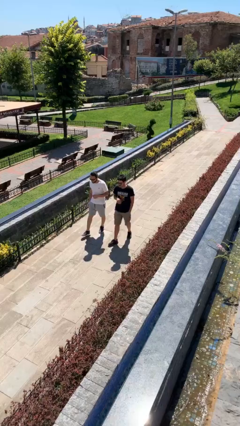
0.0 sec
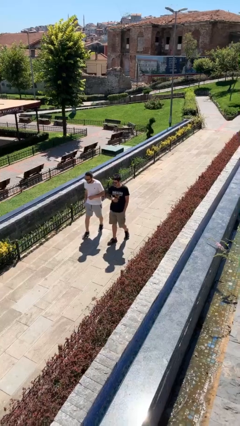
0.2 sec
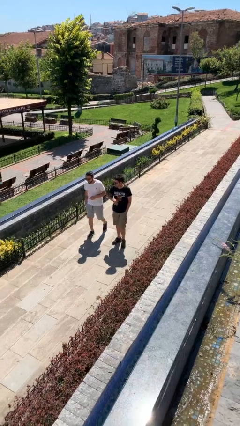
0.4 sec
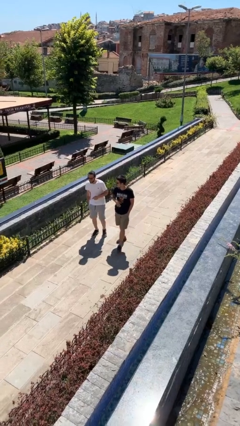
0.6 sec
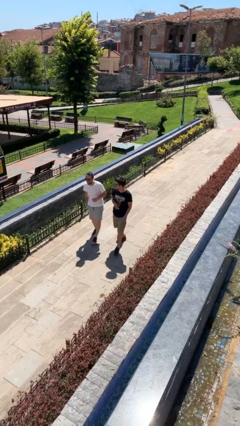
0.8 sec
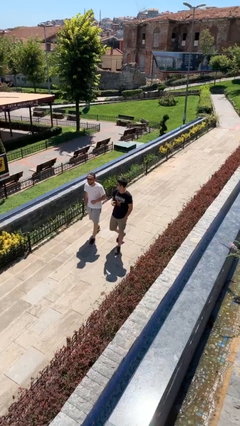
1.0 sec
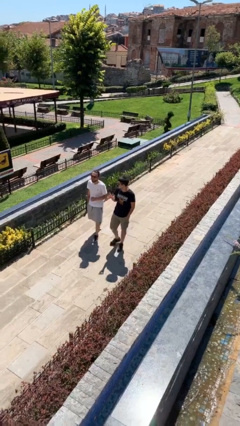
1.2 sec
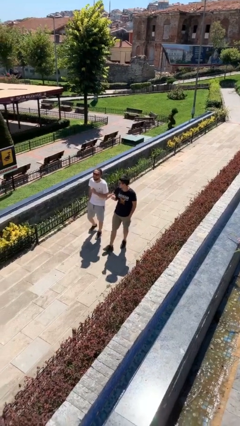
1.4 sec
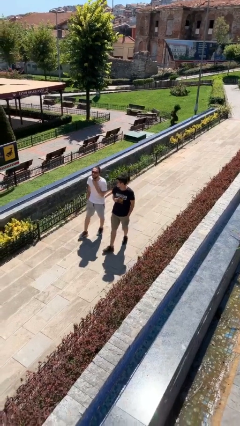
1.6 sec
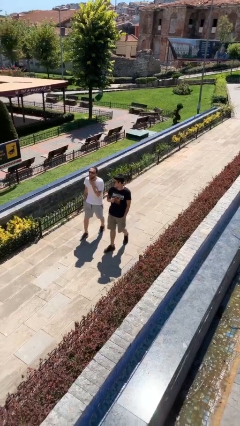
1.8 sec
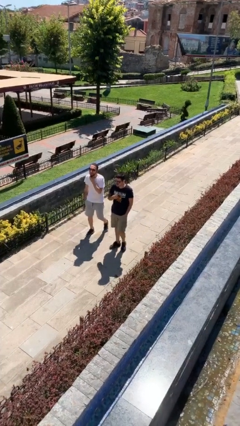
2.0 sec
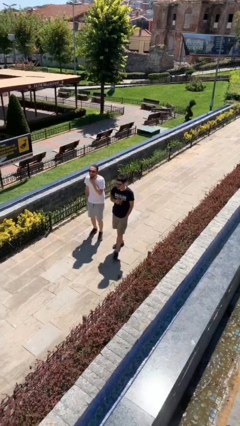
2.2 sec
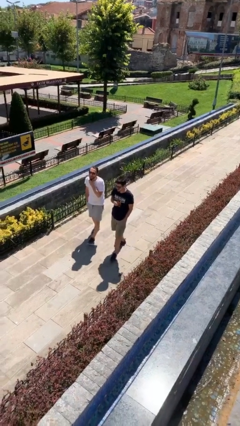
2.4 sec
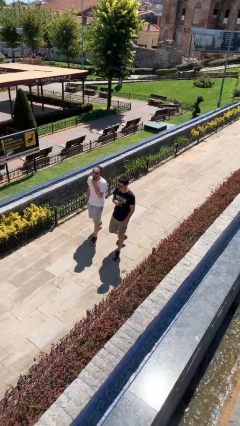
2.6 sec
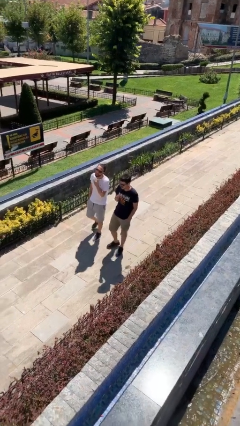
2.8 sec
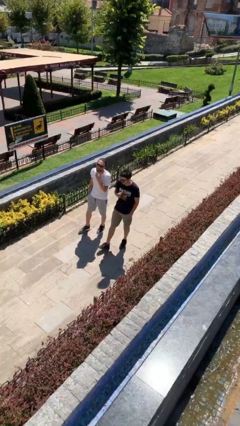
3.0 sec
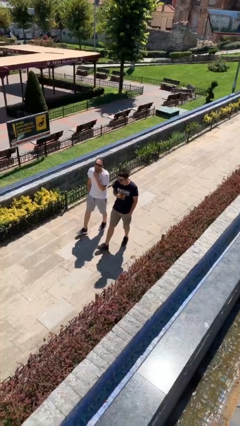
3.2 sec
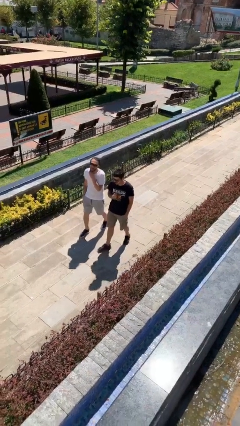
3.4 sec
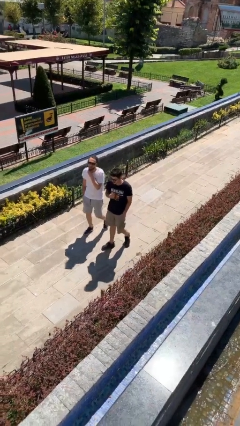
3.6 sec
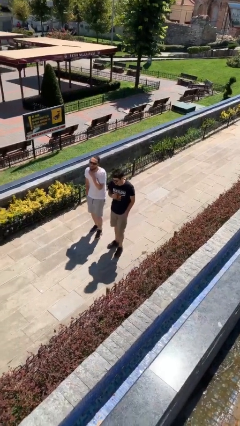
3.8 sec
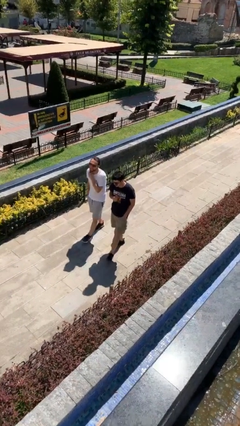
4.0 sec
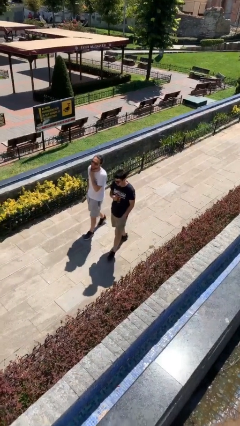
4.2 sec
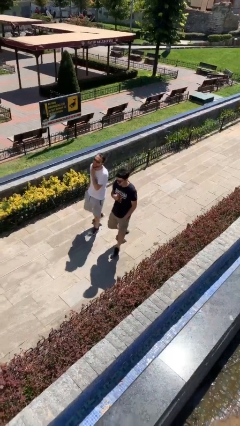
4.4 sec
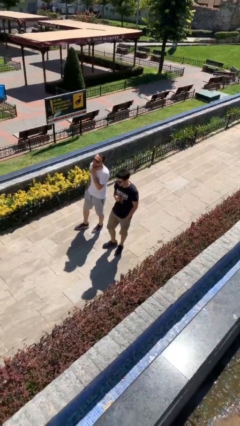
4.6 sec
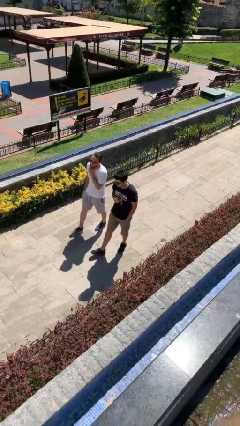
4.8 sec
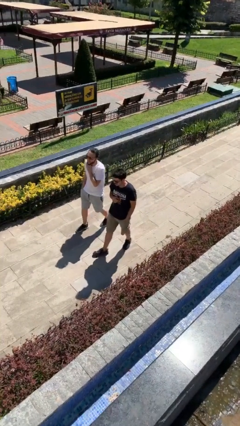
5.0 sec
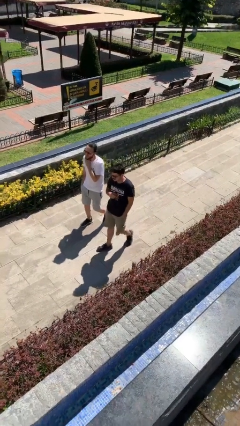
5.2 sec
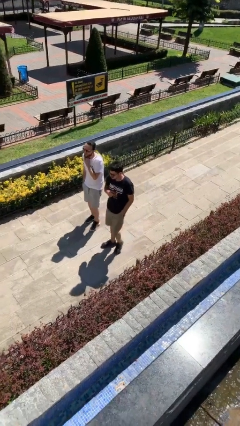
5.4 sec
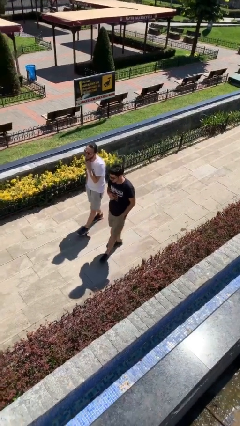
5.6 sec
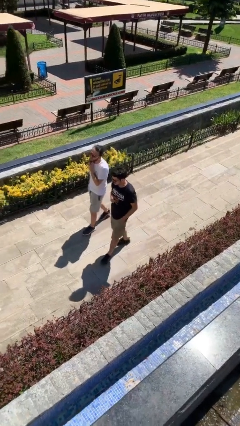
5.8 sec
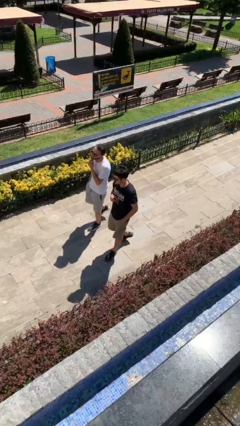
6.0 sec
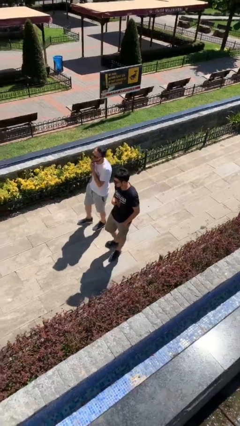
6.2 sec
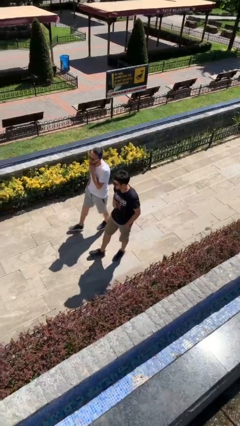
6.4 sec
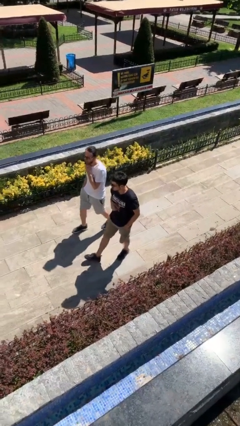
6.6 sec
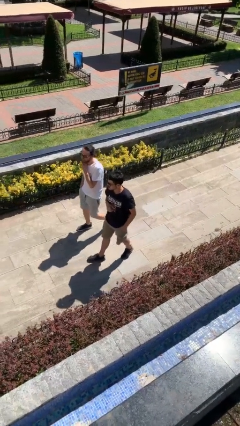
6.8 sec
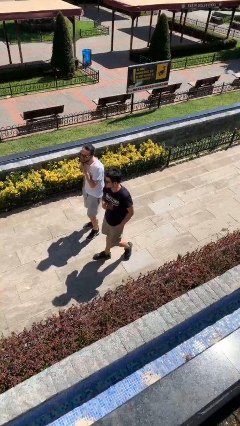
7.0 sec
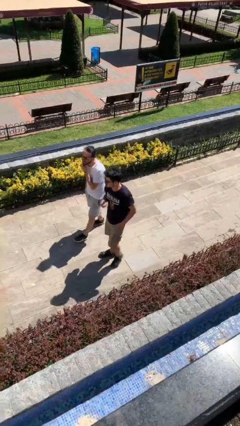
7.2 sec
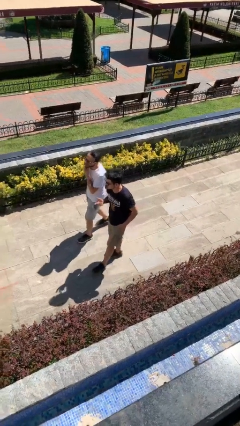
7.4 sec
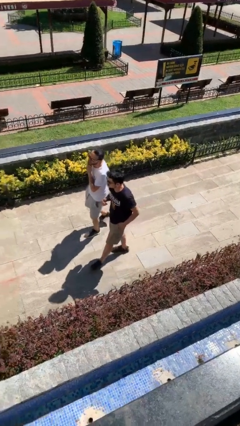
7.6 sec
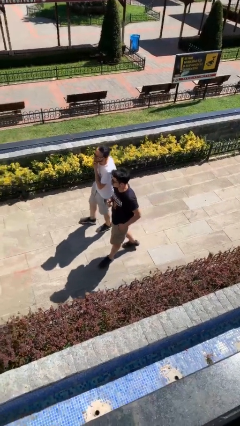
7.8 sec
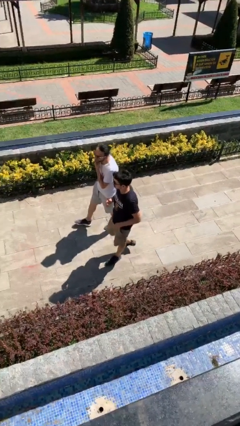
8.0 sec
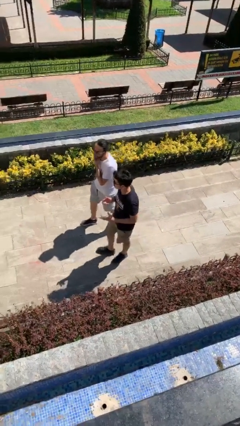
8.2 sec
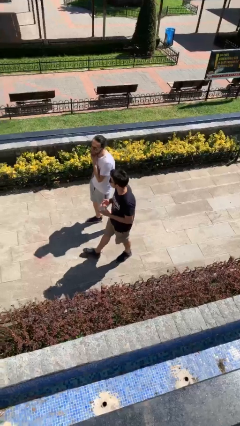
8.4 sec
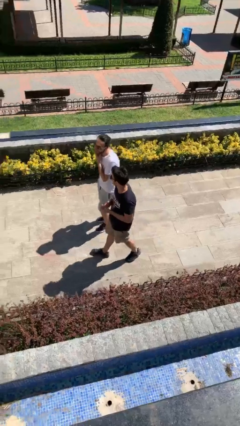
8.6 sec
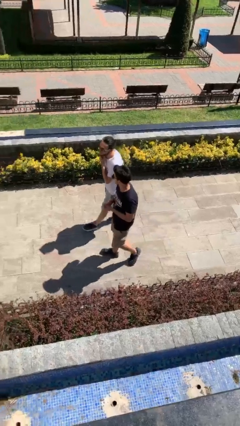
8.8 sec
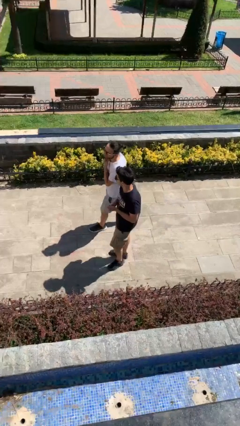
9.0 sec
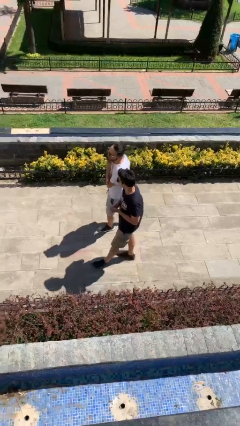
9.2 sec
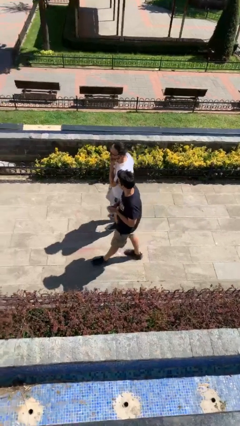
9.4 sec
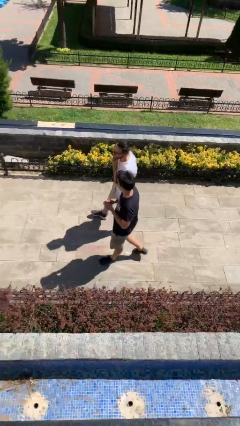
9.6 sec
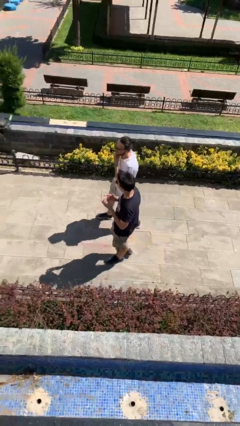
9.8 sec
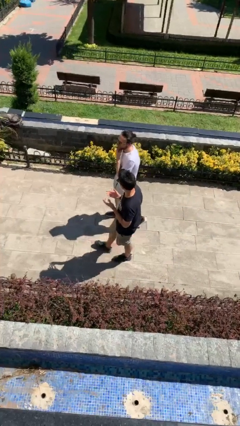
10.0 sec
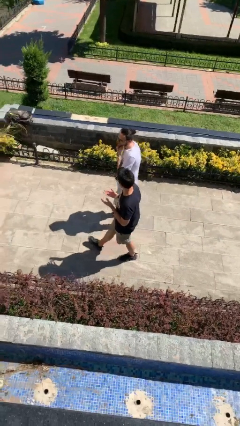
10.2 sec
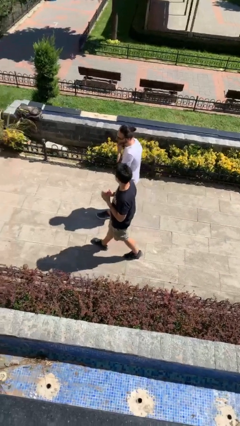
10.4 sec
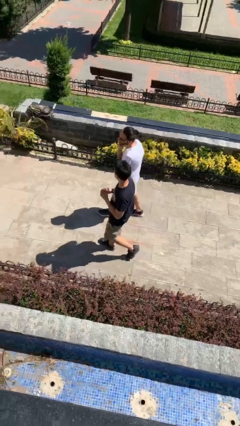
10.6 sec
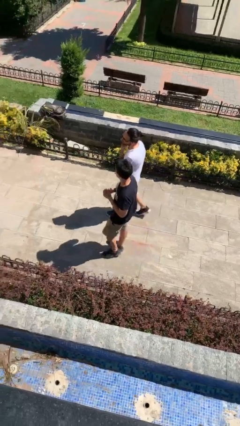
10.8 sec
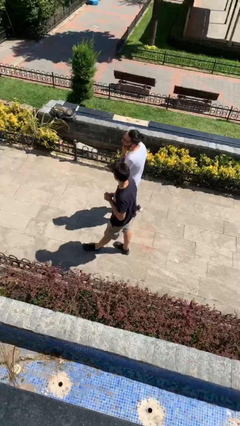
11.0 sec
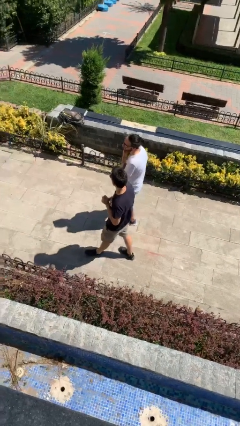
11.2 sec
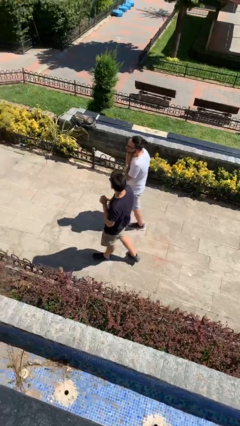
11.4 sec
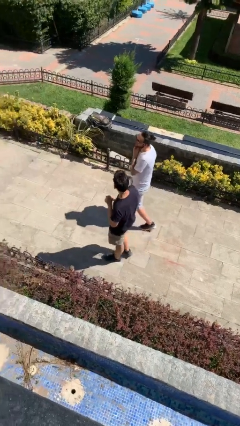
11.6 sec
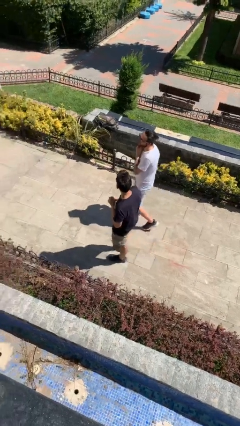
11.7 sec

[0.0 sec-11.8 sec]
person talks to person

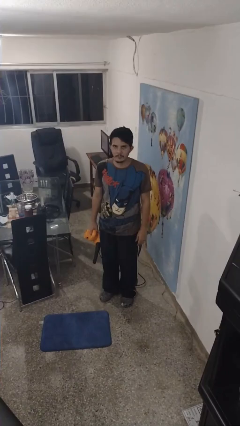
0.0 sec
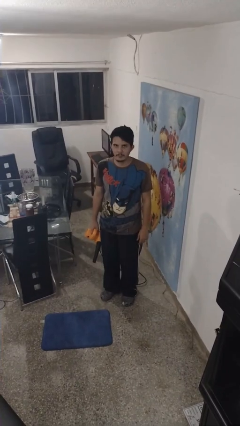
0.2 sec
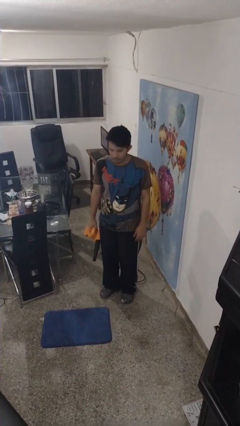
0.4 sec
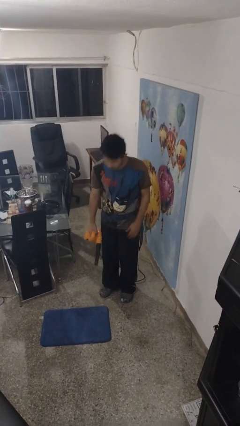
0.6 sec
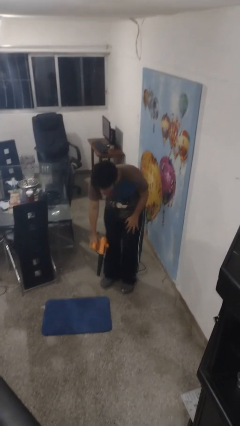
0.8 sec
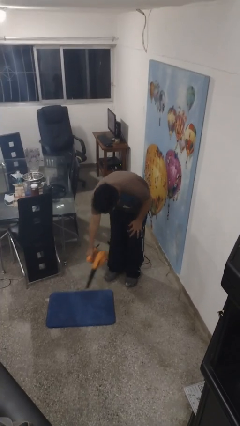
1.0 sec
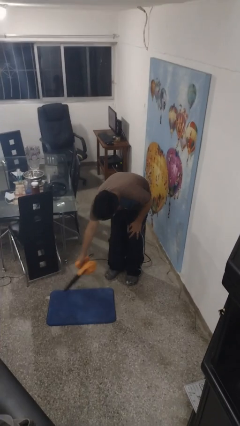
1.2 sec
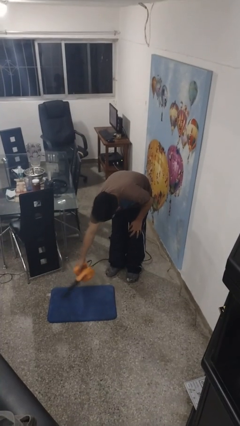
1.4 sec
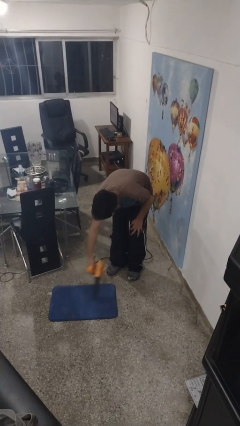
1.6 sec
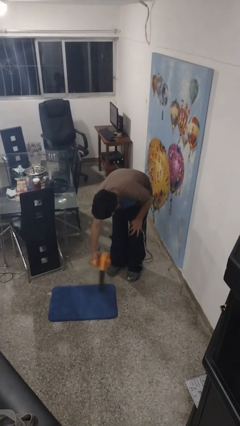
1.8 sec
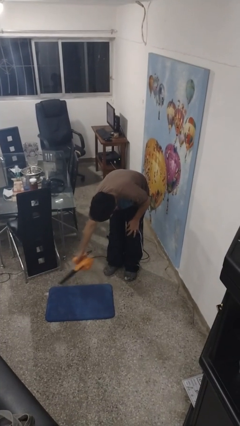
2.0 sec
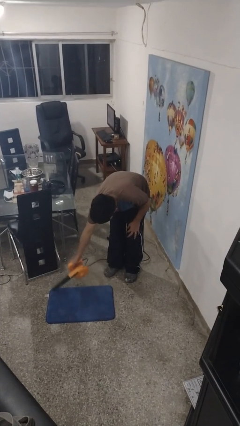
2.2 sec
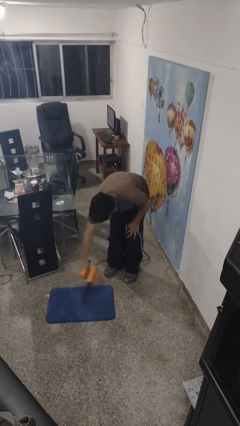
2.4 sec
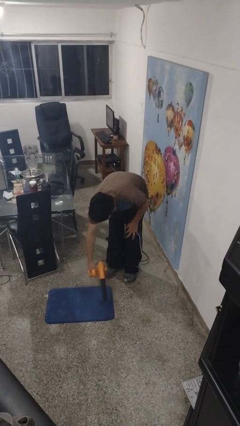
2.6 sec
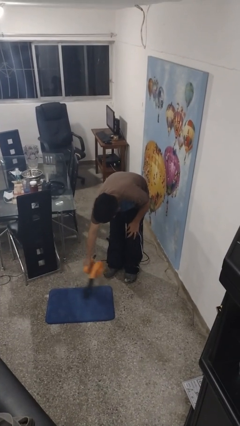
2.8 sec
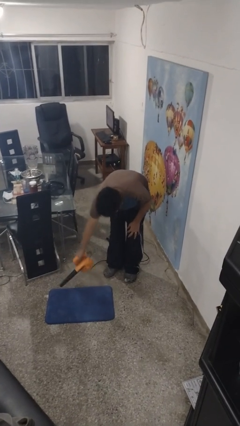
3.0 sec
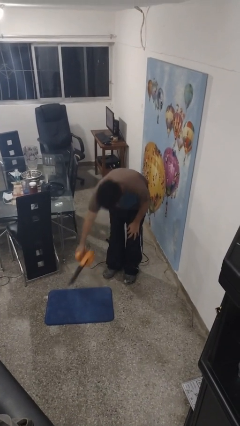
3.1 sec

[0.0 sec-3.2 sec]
person vacuums carpet

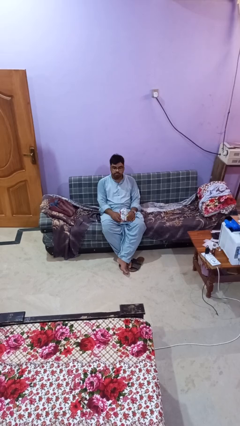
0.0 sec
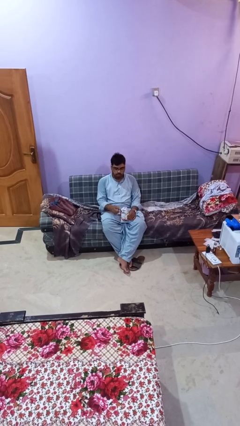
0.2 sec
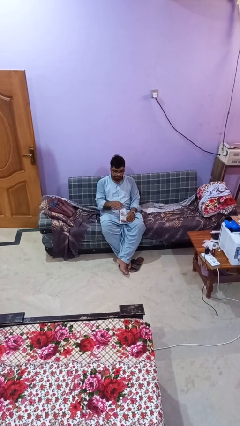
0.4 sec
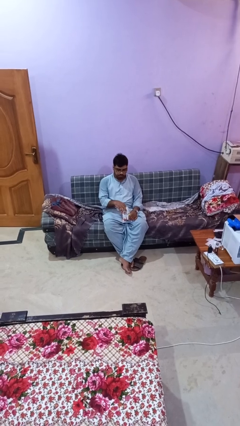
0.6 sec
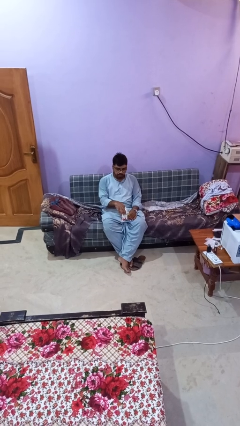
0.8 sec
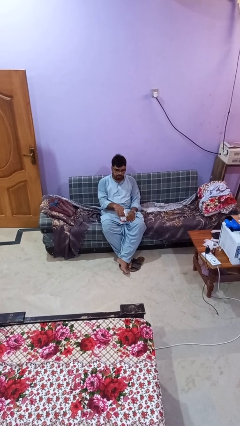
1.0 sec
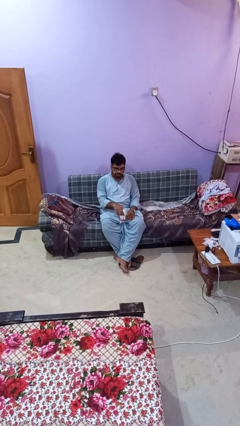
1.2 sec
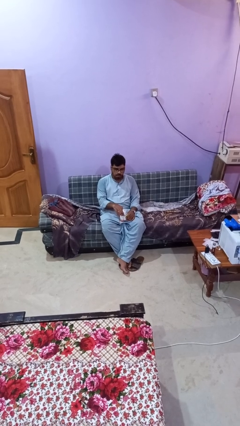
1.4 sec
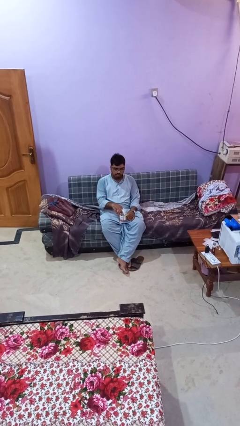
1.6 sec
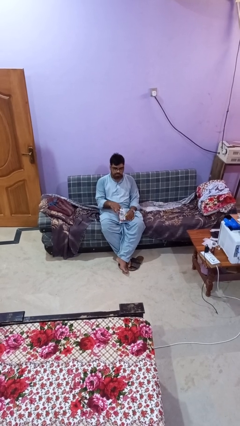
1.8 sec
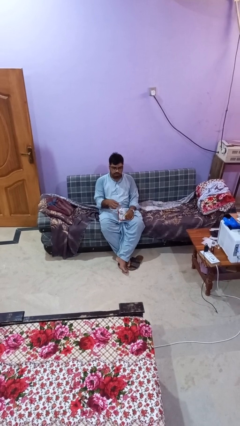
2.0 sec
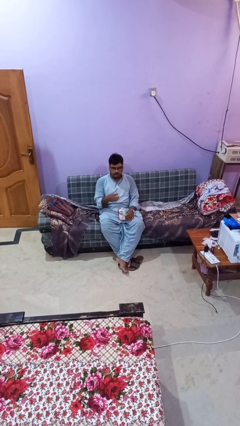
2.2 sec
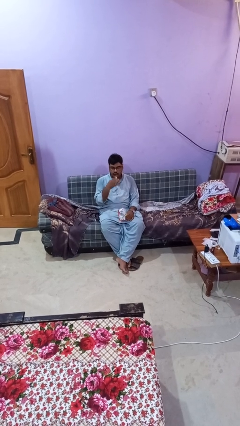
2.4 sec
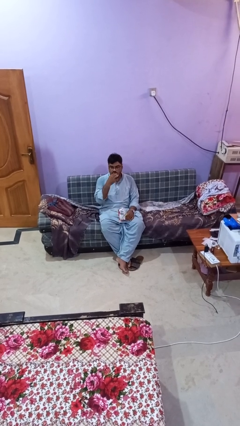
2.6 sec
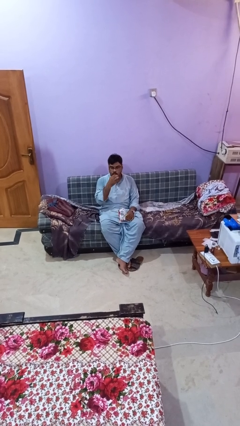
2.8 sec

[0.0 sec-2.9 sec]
person eats snack from bag

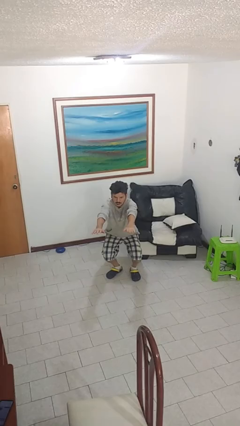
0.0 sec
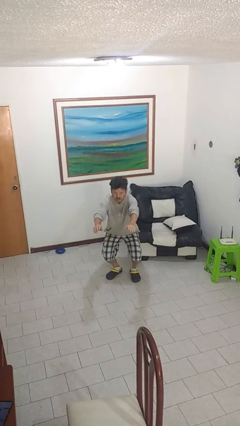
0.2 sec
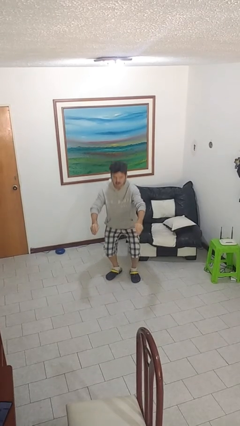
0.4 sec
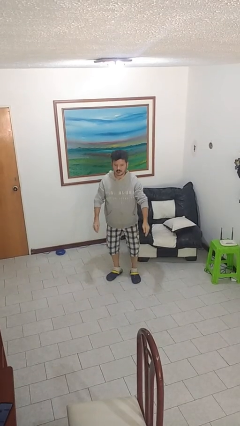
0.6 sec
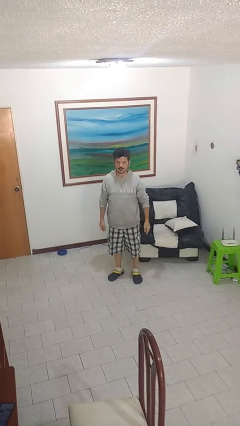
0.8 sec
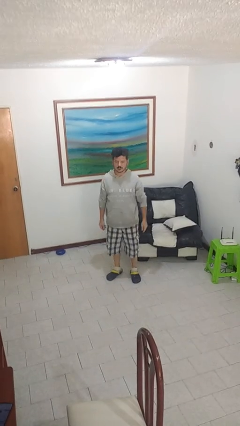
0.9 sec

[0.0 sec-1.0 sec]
person stands up
